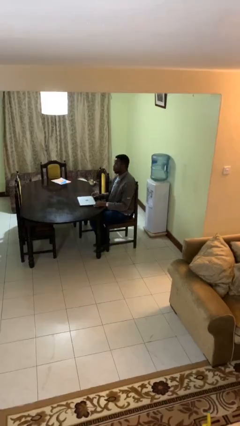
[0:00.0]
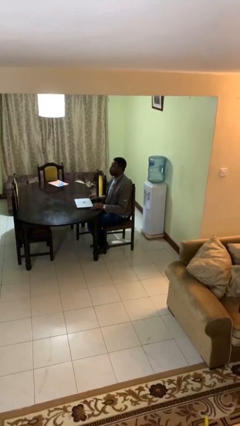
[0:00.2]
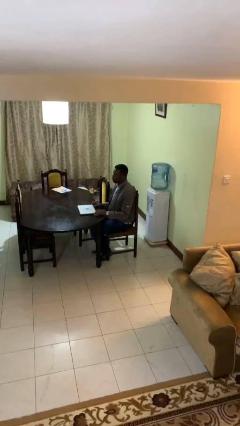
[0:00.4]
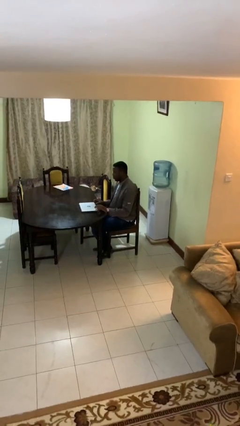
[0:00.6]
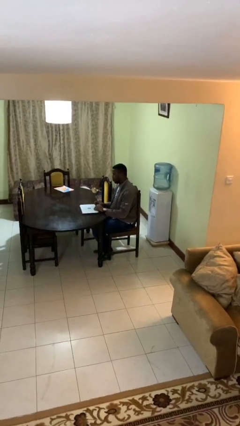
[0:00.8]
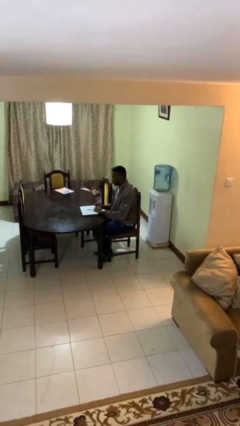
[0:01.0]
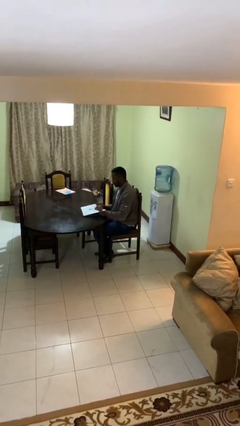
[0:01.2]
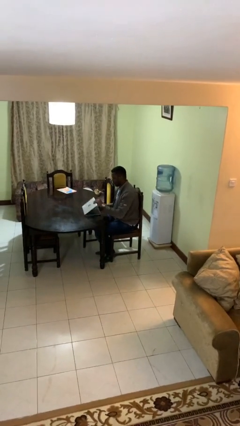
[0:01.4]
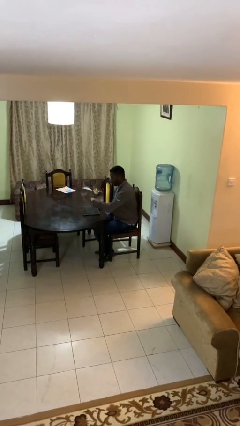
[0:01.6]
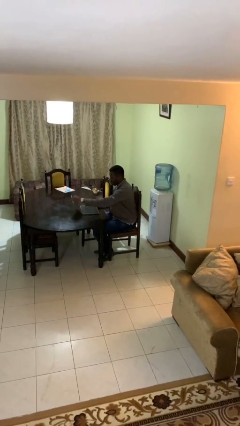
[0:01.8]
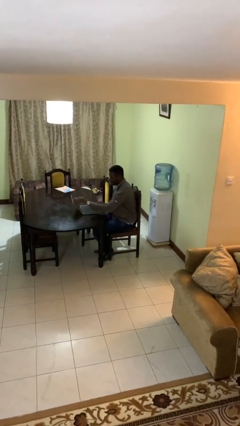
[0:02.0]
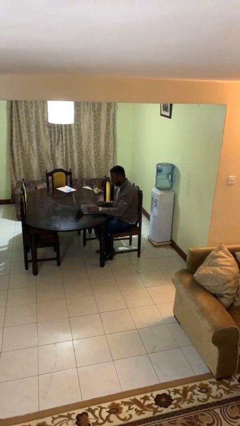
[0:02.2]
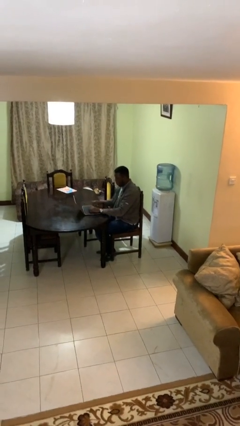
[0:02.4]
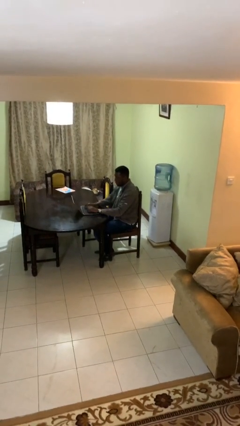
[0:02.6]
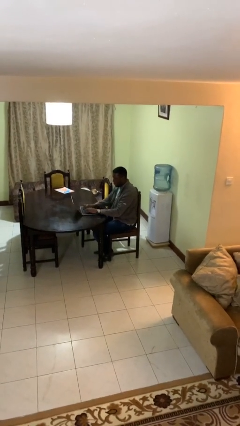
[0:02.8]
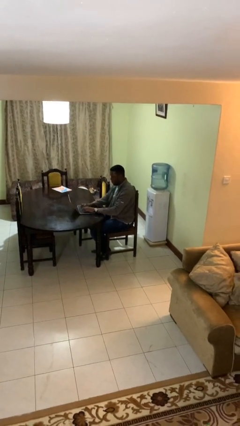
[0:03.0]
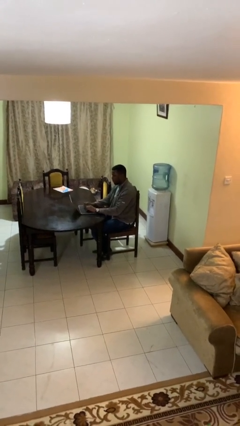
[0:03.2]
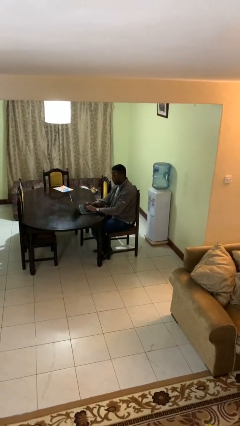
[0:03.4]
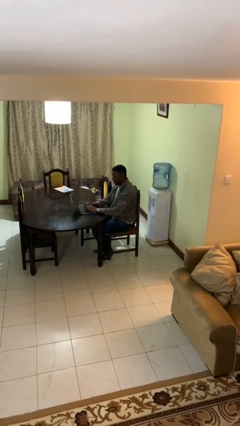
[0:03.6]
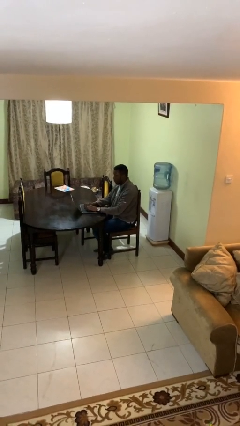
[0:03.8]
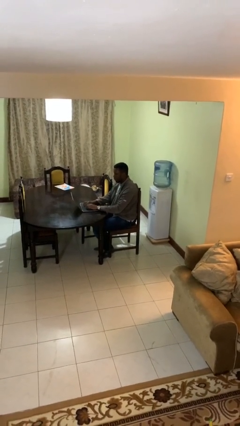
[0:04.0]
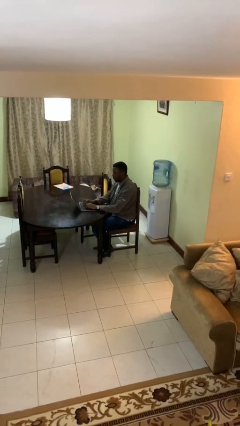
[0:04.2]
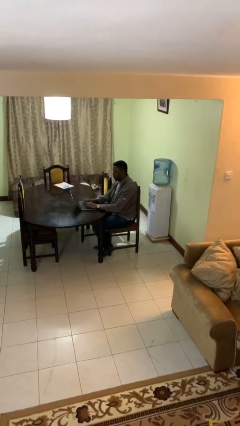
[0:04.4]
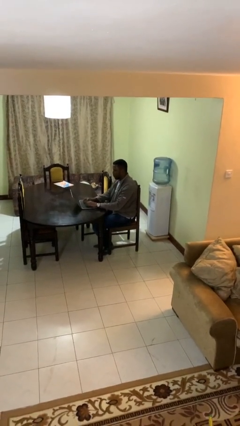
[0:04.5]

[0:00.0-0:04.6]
person interacts with laptop

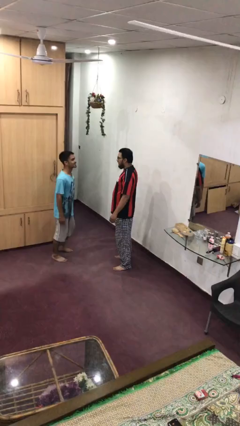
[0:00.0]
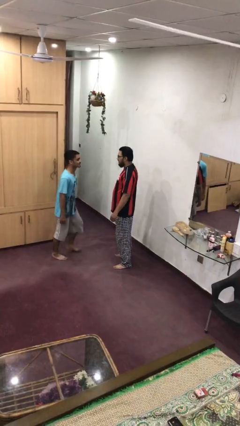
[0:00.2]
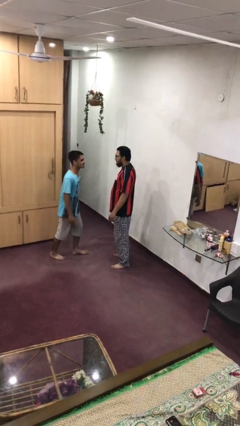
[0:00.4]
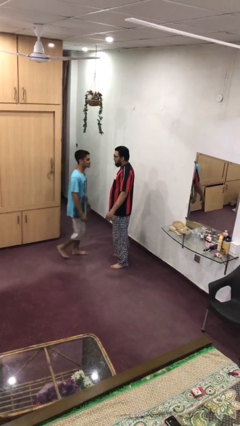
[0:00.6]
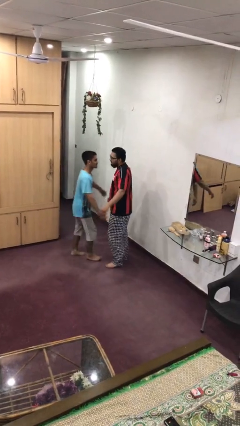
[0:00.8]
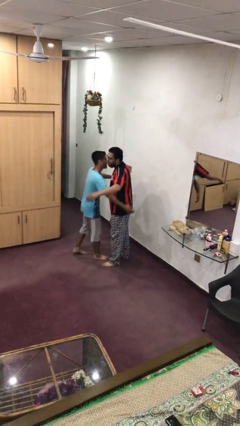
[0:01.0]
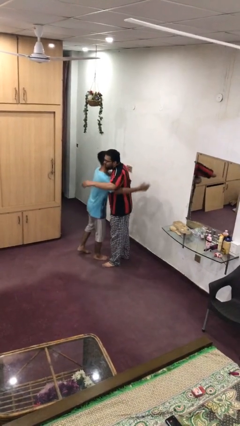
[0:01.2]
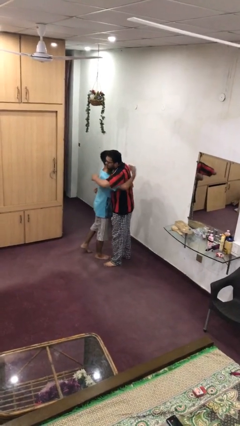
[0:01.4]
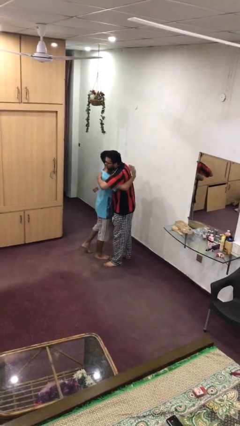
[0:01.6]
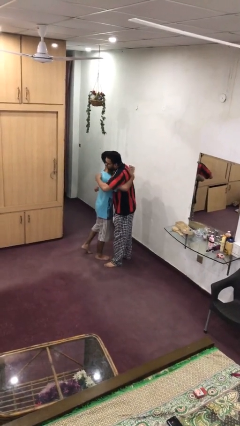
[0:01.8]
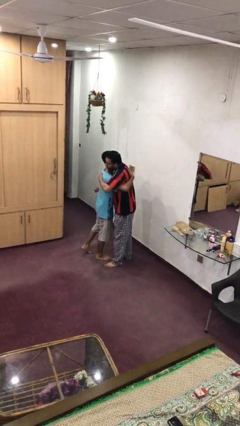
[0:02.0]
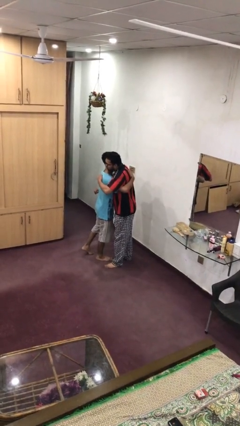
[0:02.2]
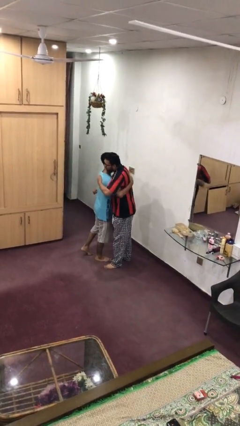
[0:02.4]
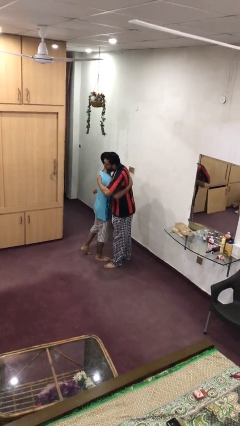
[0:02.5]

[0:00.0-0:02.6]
person embraces person

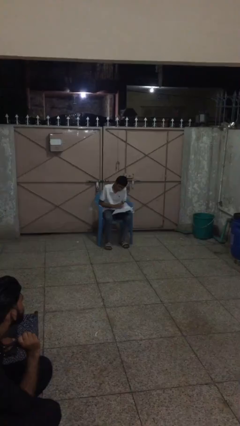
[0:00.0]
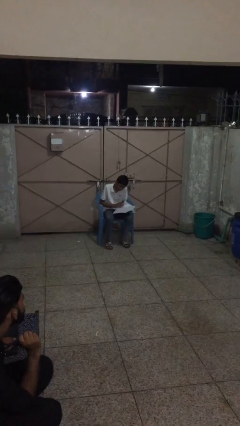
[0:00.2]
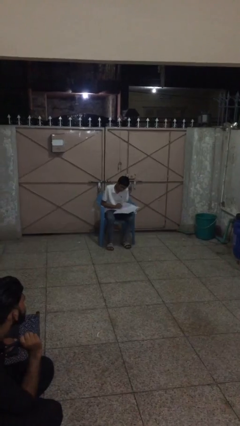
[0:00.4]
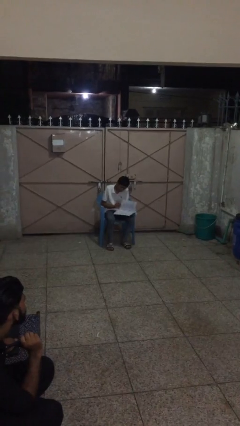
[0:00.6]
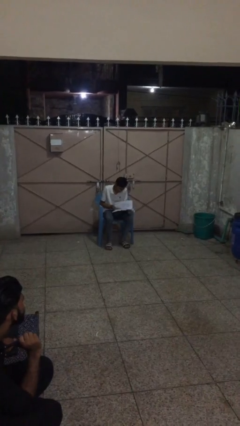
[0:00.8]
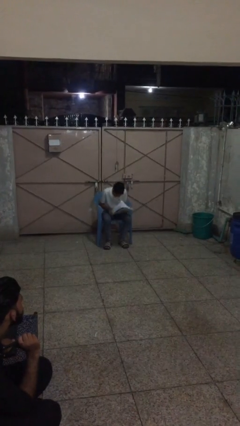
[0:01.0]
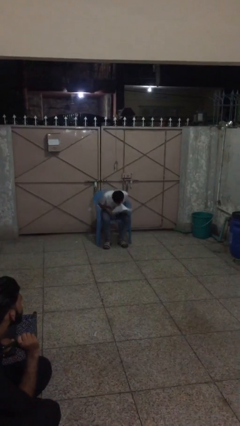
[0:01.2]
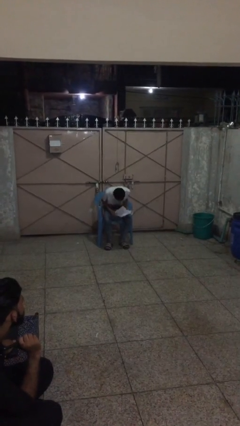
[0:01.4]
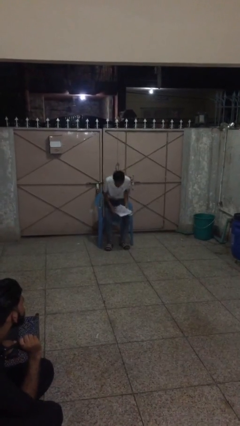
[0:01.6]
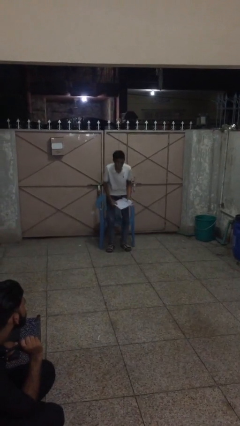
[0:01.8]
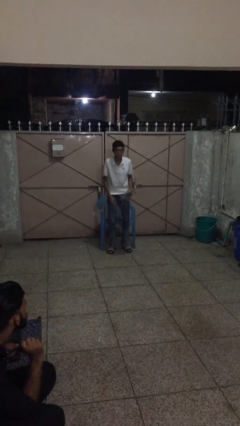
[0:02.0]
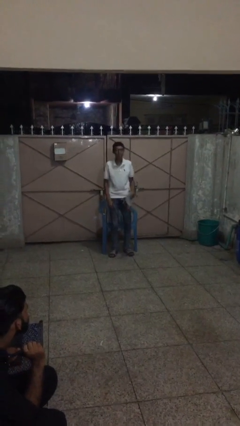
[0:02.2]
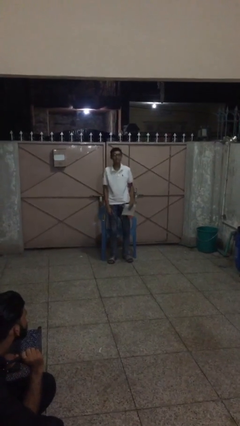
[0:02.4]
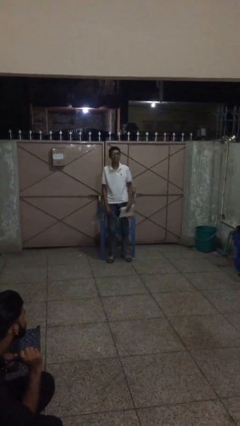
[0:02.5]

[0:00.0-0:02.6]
person stands up

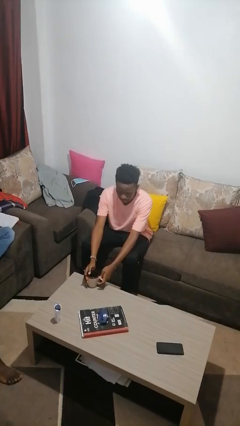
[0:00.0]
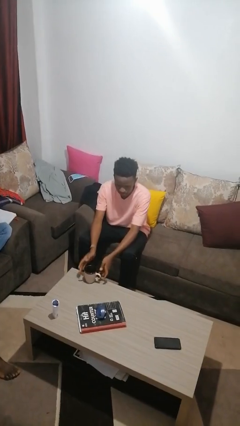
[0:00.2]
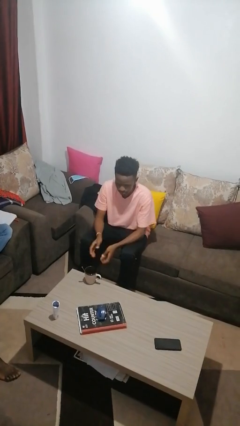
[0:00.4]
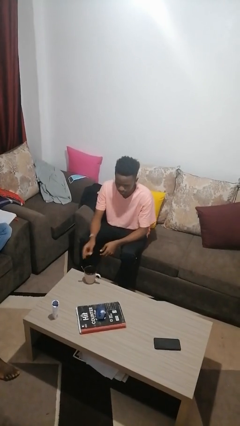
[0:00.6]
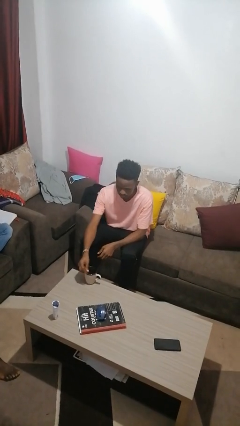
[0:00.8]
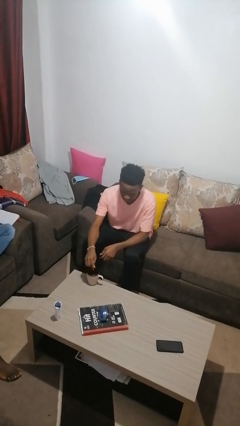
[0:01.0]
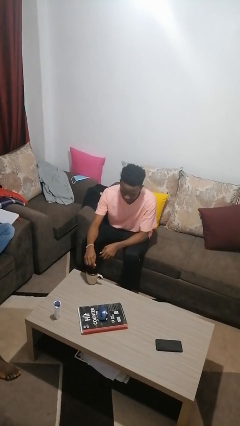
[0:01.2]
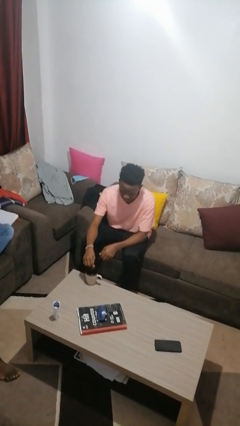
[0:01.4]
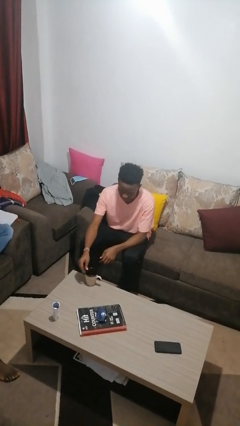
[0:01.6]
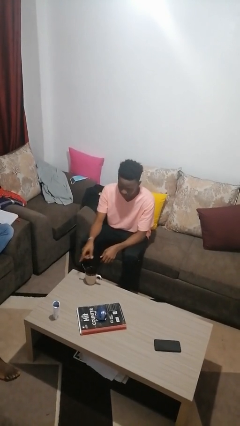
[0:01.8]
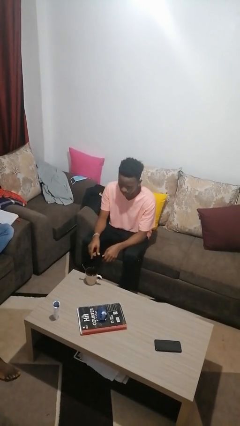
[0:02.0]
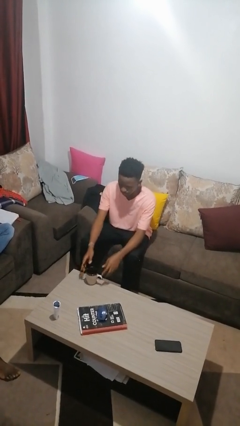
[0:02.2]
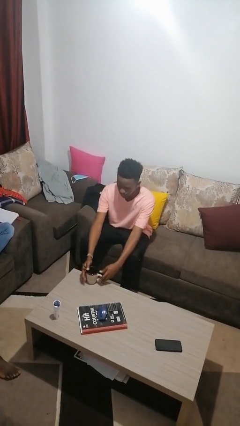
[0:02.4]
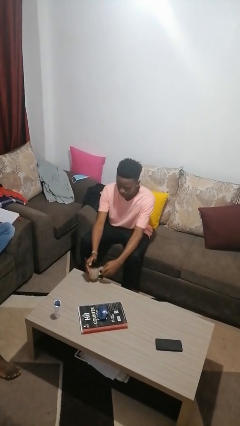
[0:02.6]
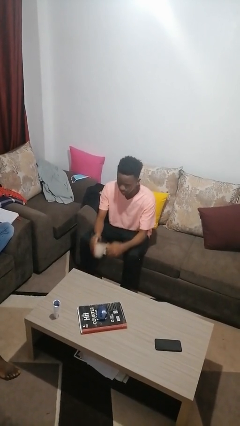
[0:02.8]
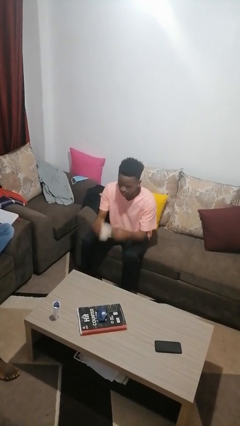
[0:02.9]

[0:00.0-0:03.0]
person stirs mug

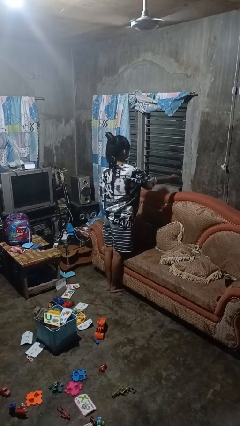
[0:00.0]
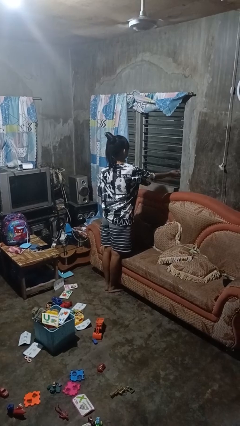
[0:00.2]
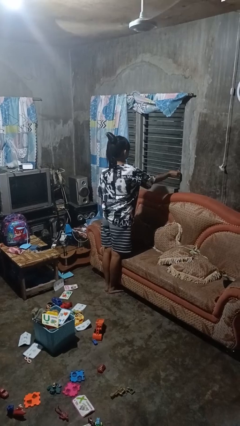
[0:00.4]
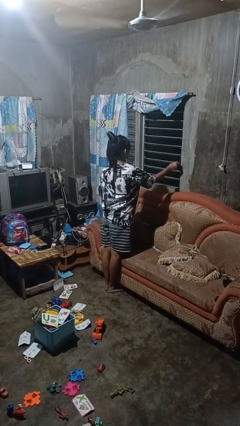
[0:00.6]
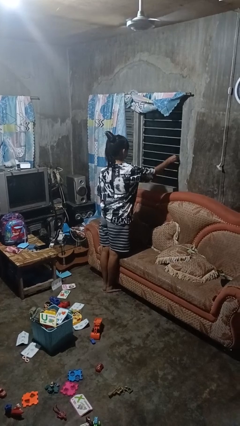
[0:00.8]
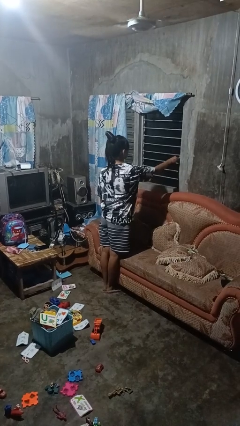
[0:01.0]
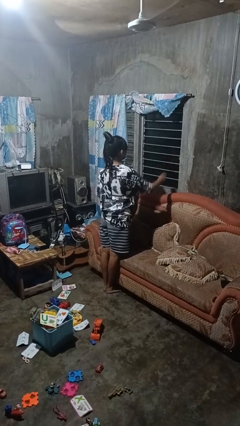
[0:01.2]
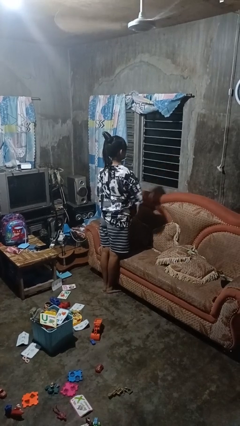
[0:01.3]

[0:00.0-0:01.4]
person closes home window

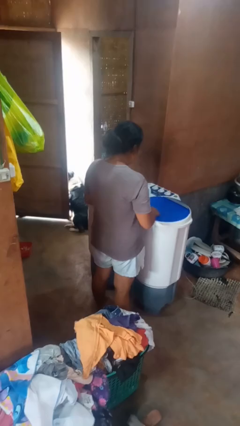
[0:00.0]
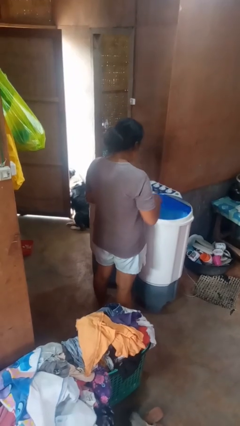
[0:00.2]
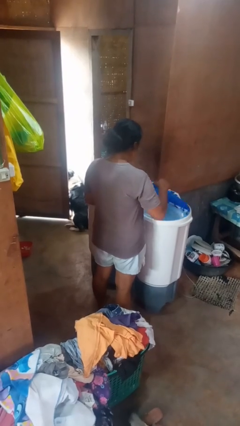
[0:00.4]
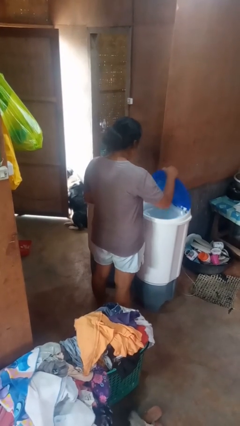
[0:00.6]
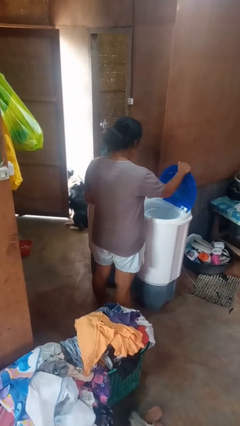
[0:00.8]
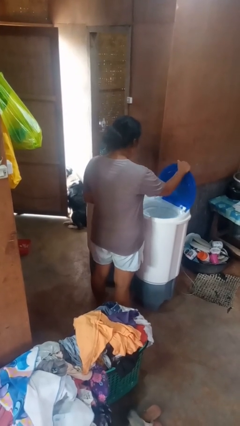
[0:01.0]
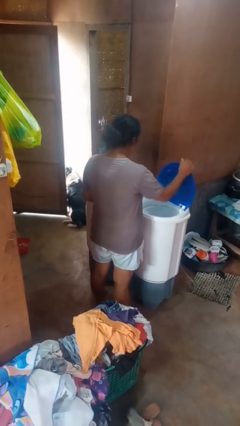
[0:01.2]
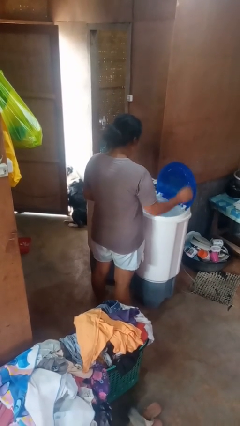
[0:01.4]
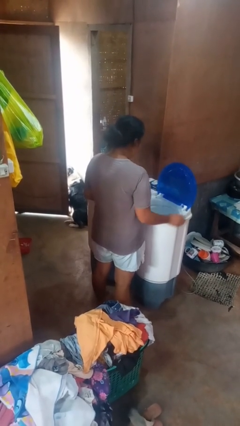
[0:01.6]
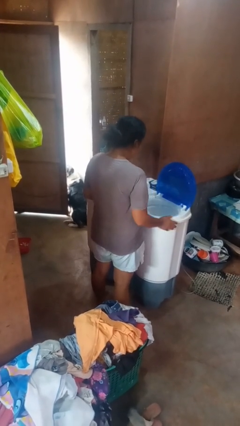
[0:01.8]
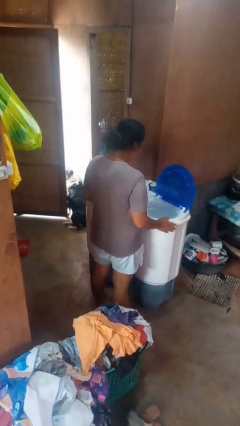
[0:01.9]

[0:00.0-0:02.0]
person opens clothes washer

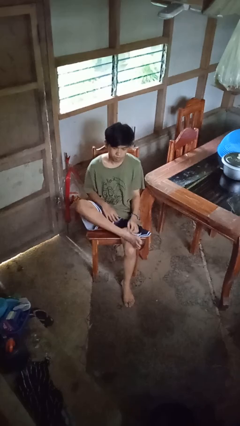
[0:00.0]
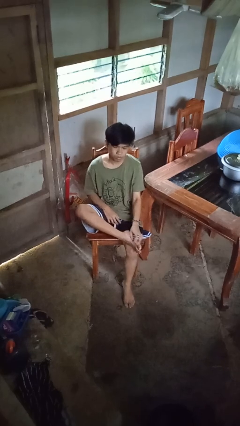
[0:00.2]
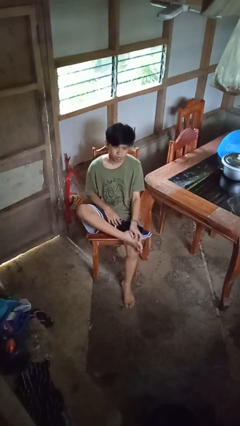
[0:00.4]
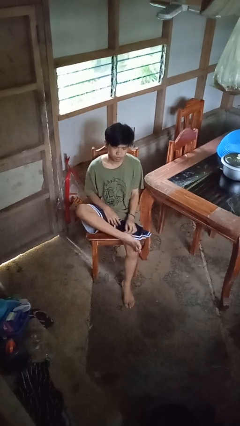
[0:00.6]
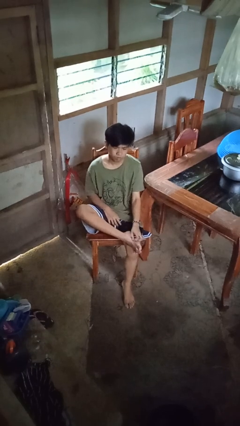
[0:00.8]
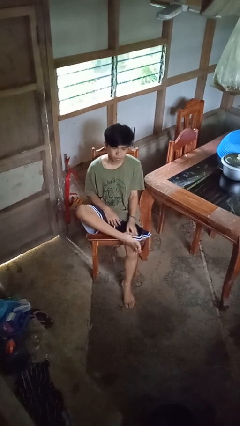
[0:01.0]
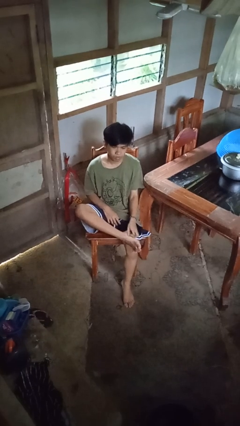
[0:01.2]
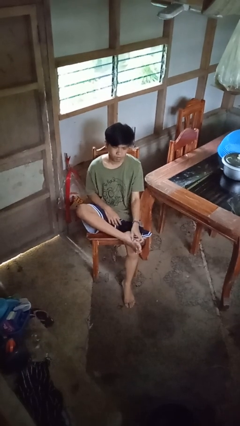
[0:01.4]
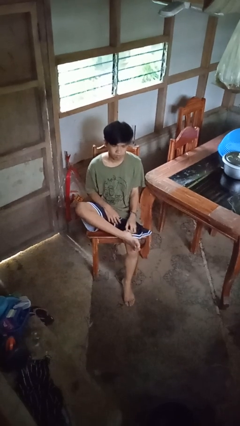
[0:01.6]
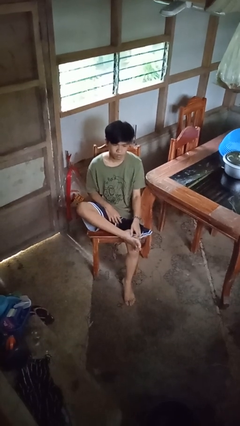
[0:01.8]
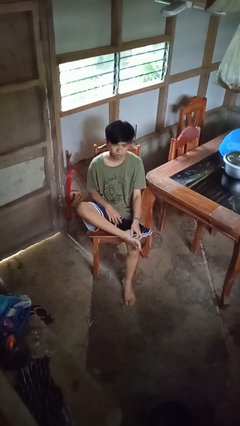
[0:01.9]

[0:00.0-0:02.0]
person rubs foot
